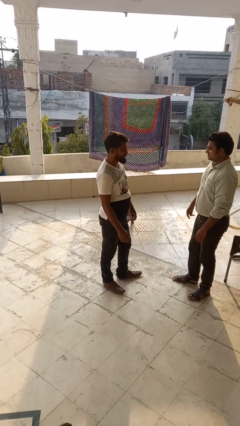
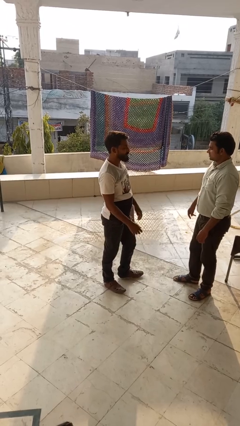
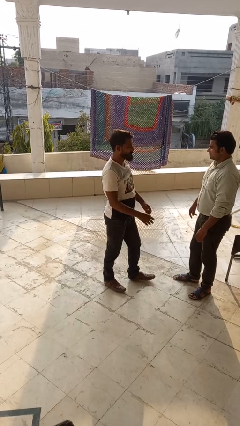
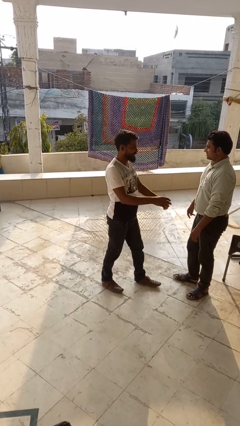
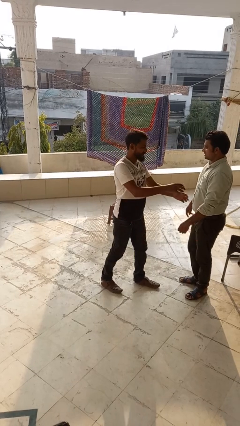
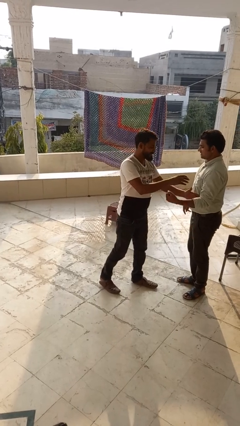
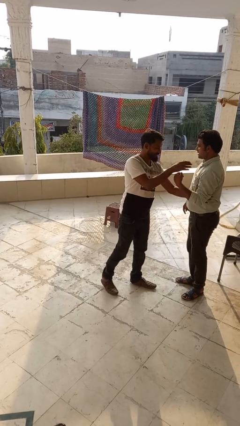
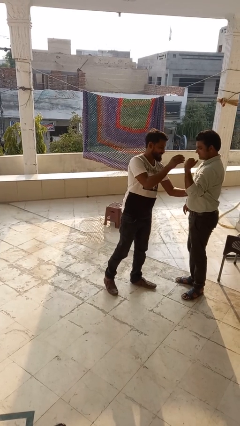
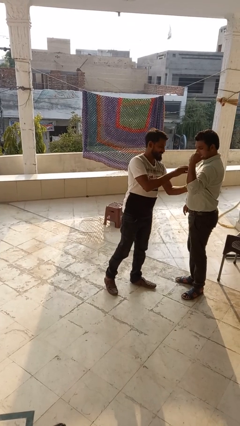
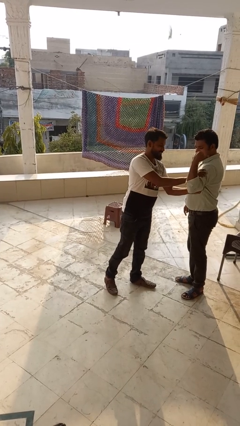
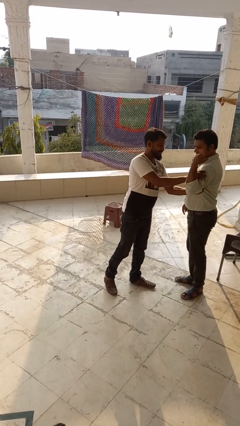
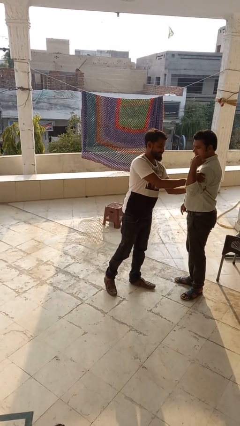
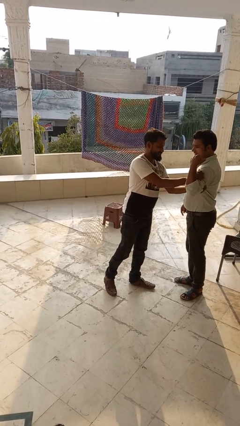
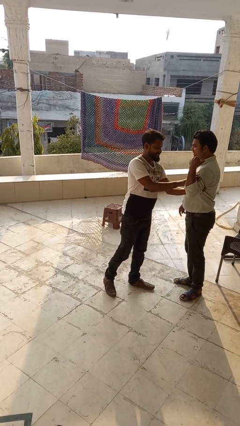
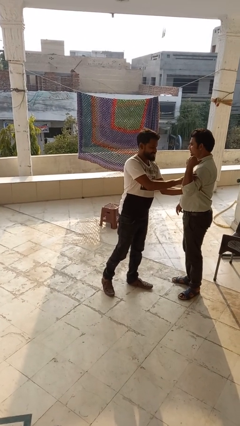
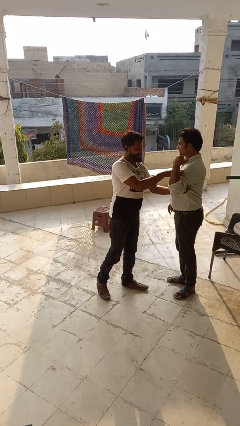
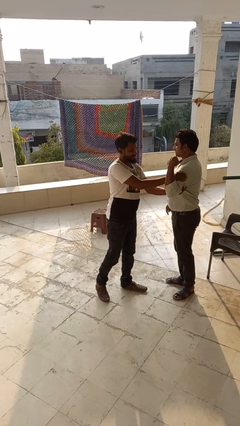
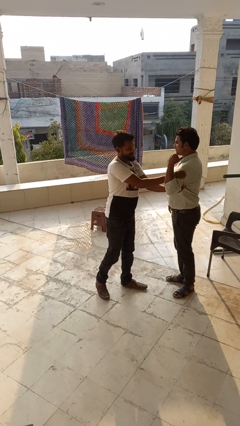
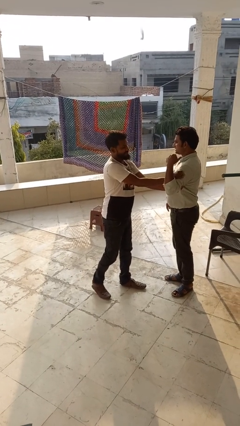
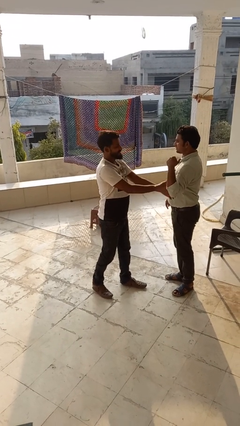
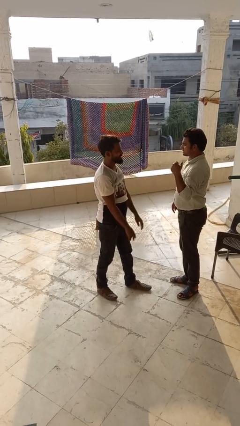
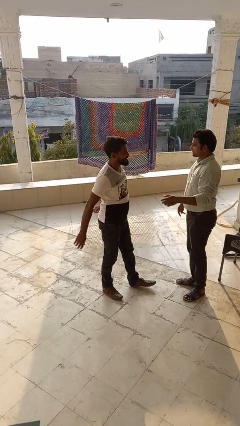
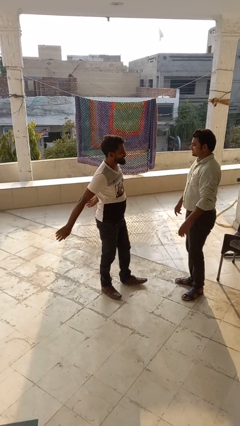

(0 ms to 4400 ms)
person grabs person by bicep

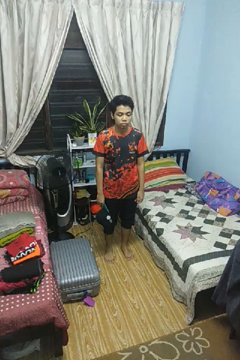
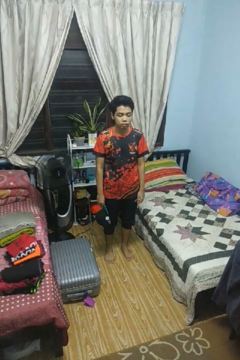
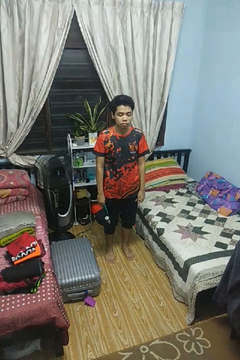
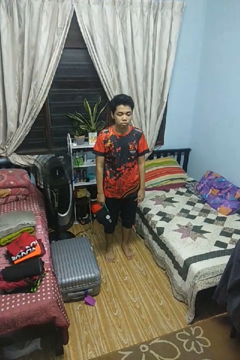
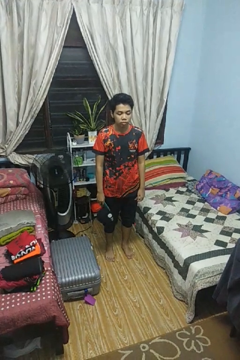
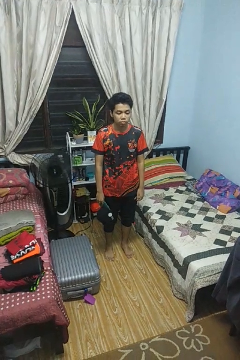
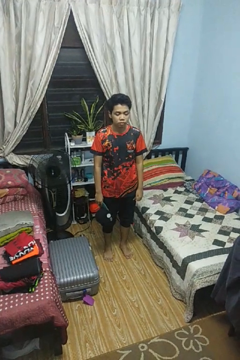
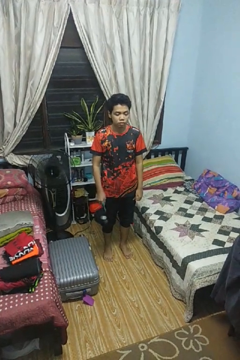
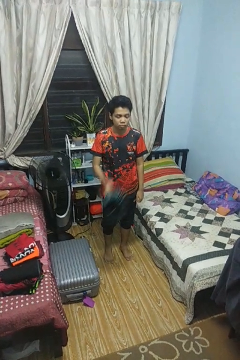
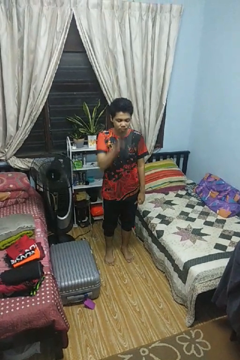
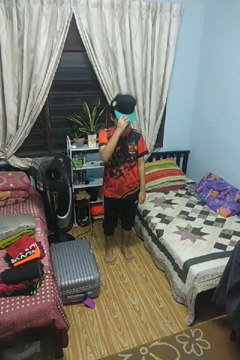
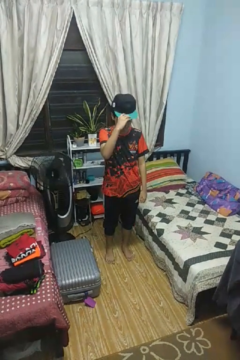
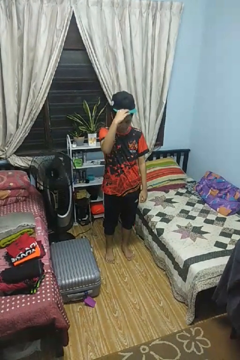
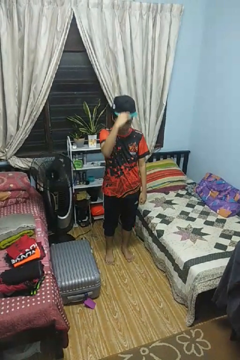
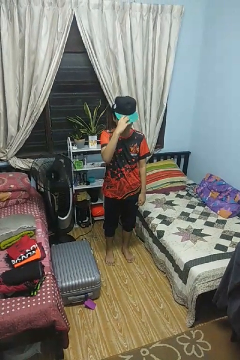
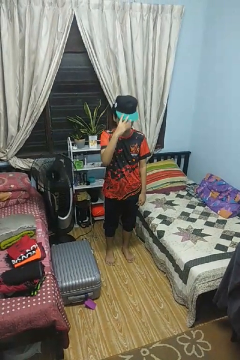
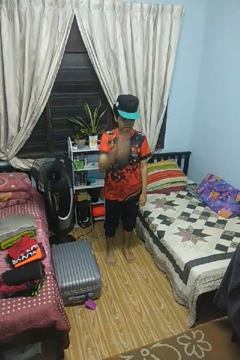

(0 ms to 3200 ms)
person puts on hat

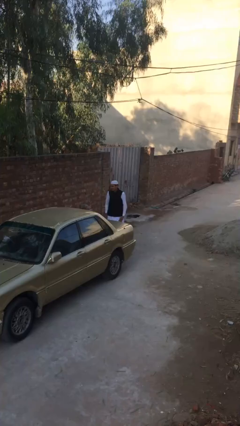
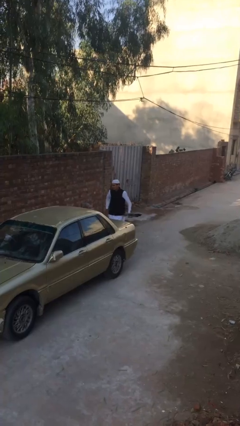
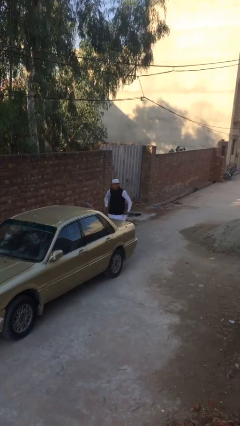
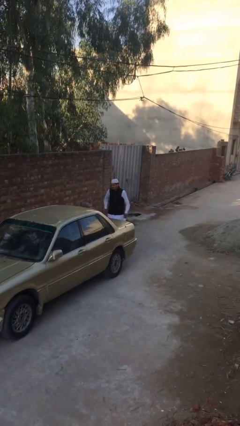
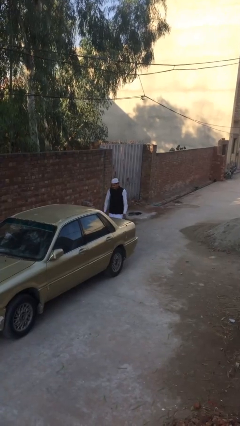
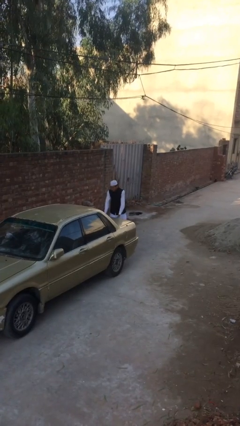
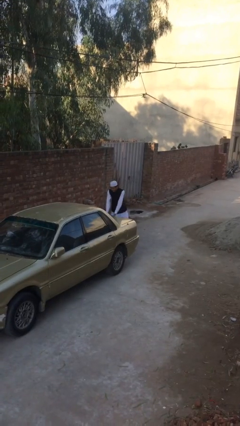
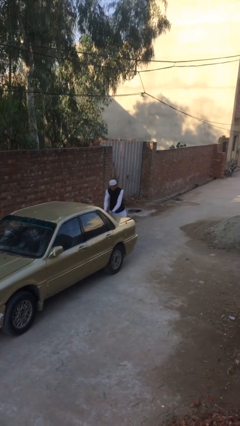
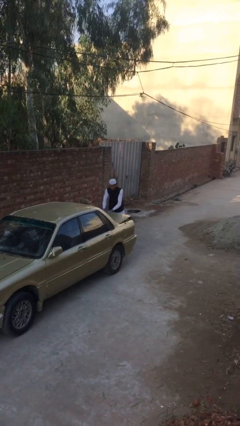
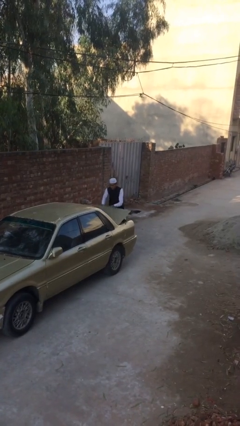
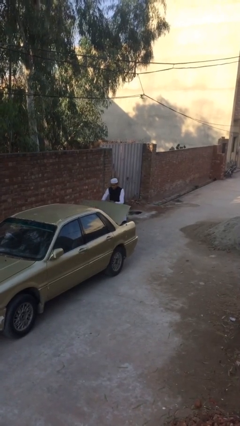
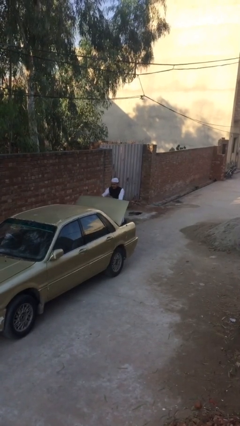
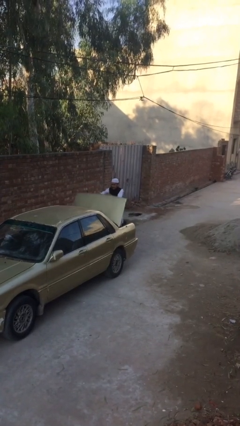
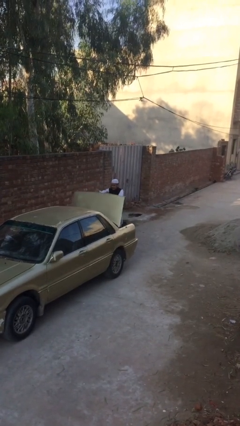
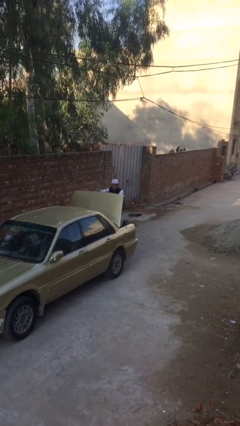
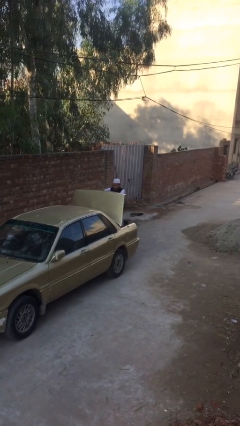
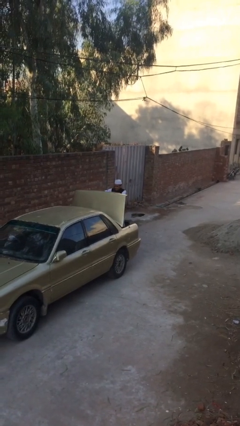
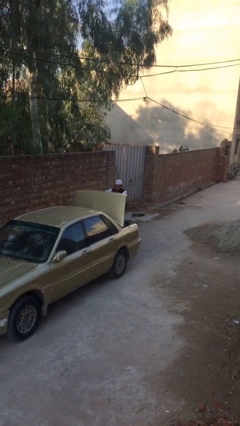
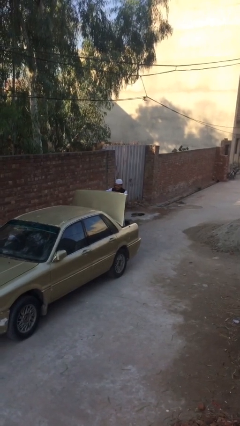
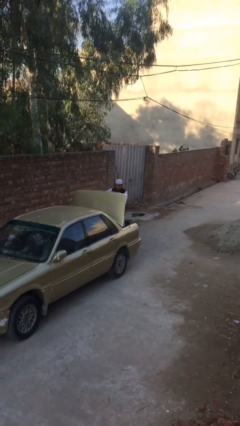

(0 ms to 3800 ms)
person opens car trunk

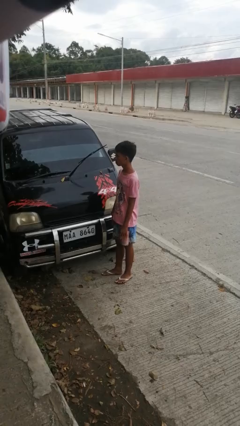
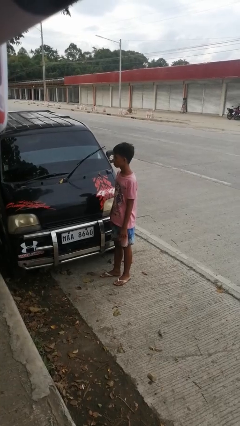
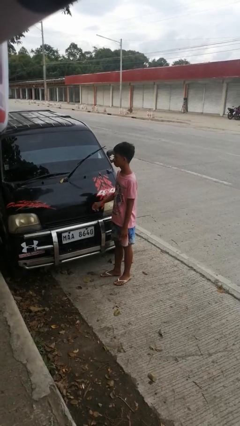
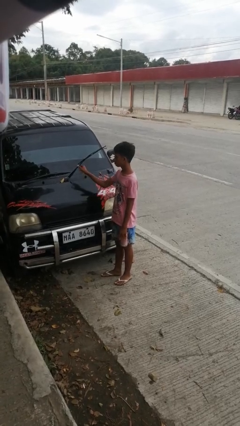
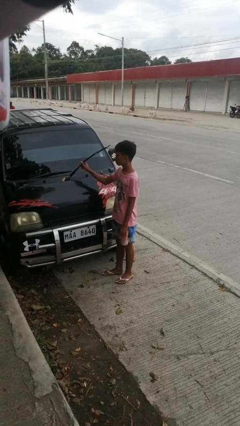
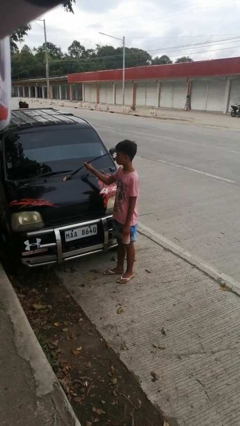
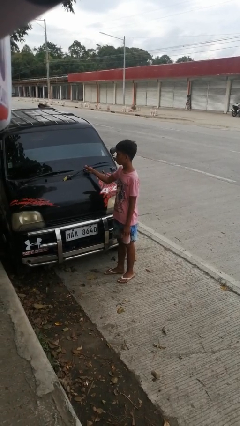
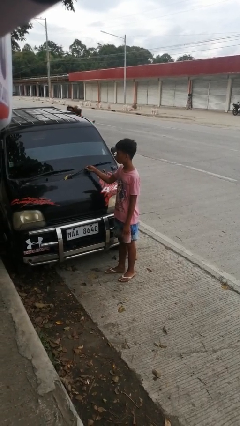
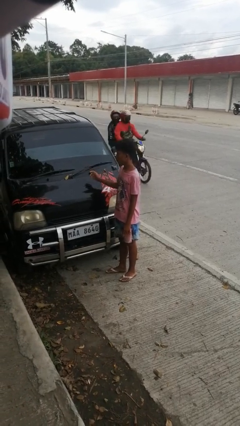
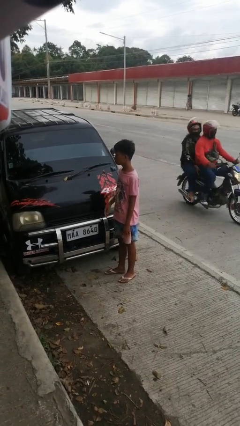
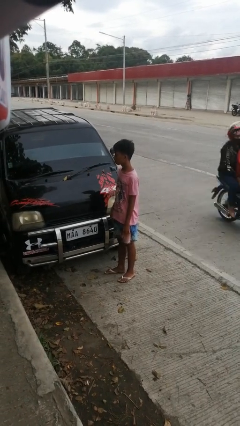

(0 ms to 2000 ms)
person flips down car wipers

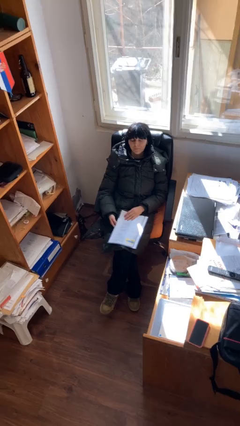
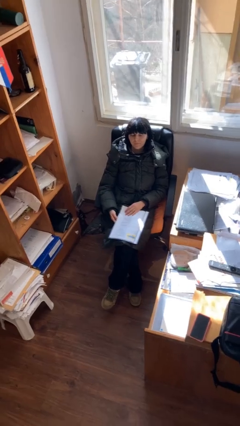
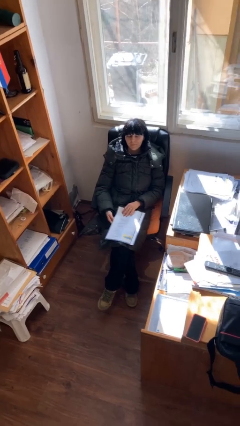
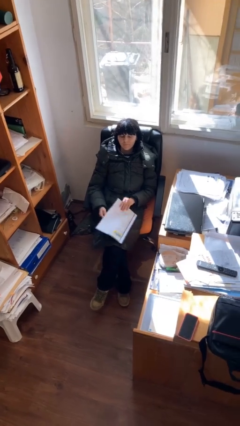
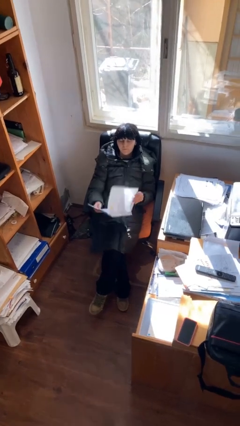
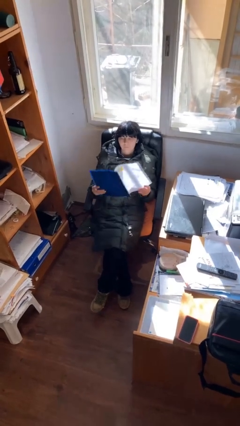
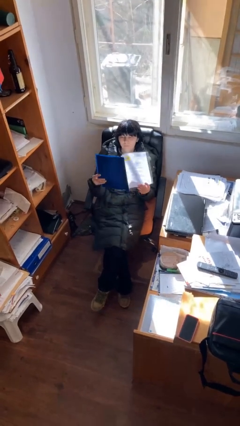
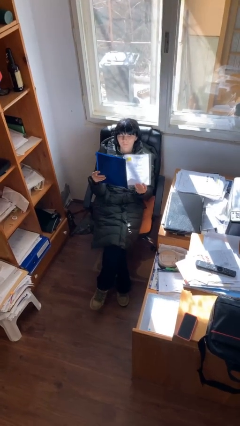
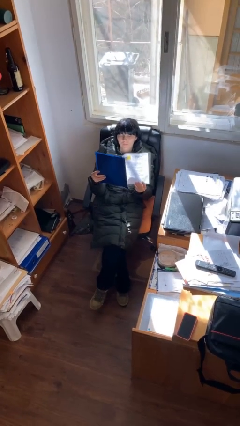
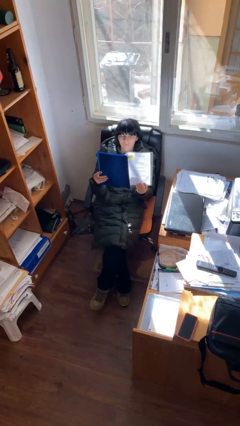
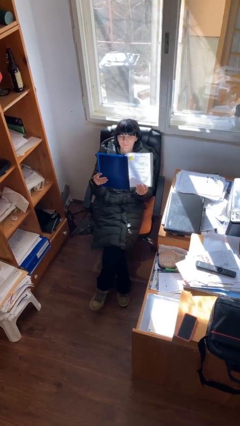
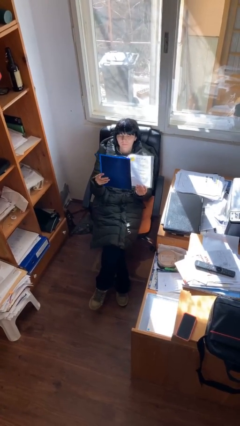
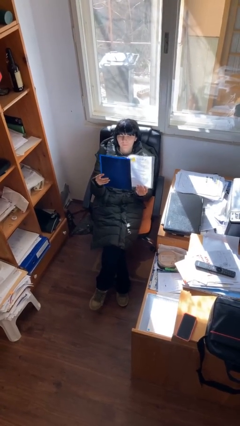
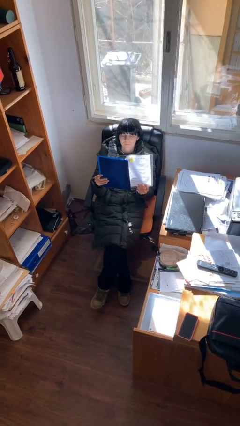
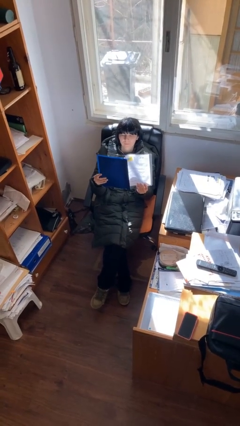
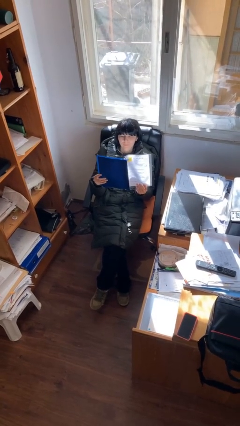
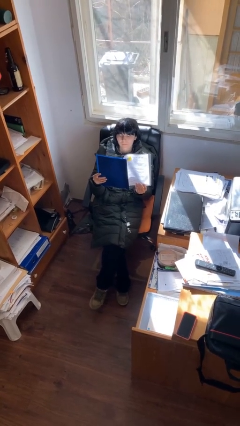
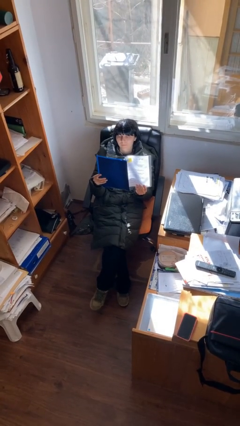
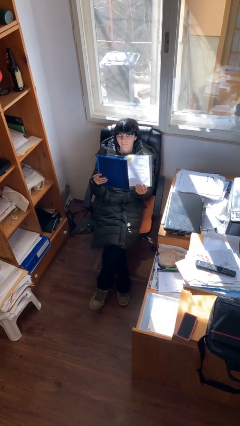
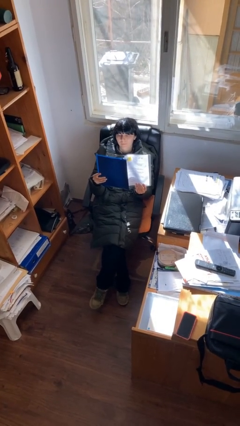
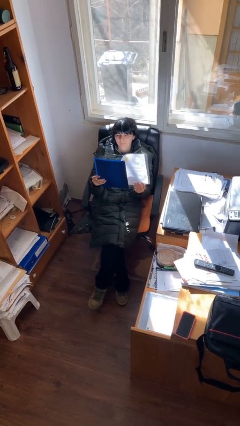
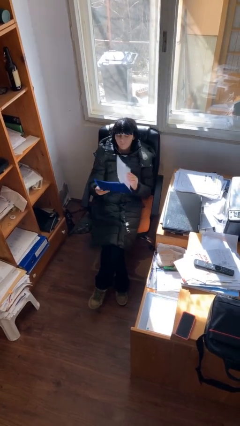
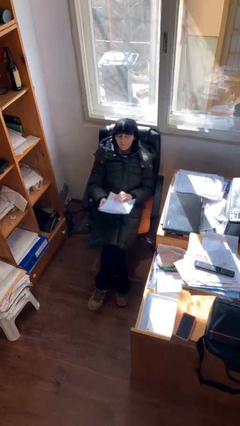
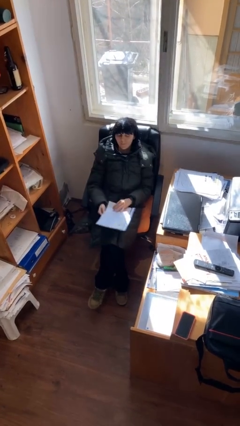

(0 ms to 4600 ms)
person reads document

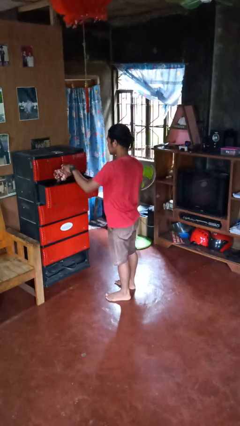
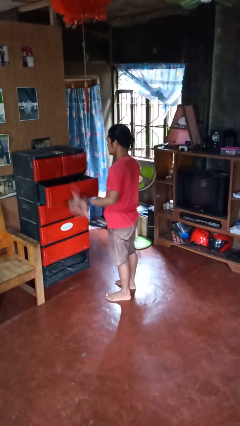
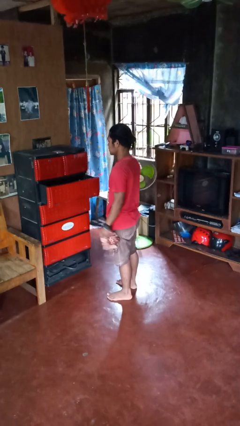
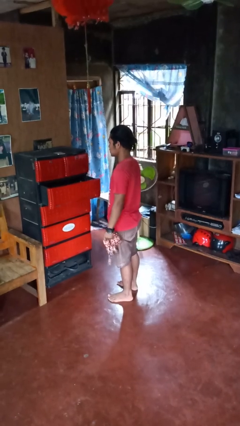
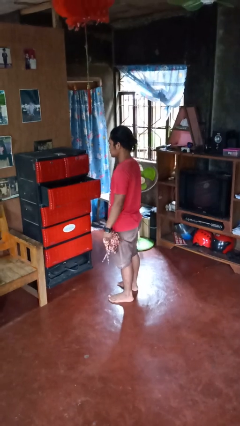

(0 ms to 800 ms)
person takes clothes from dresser
